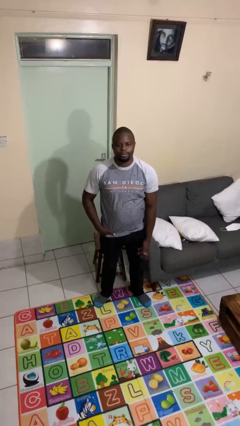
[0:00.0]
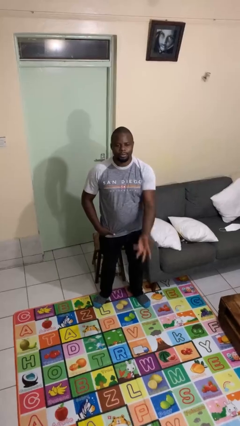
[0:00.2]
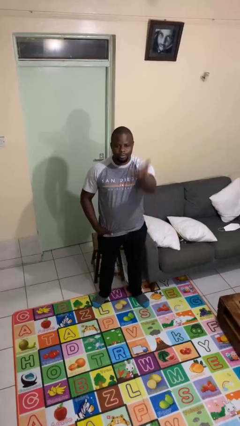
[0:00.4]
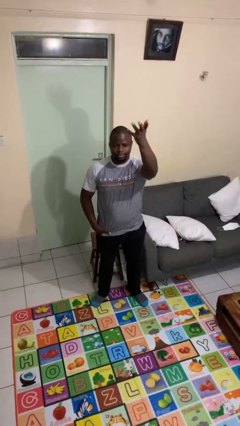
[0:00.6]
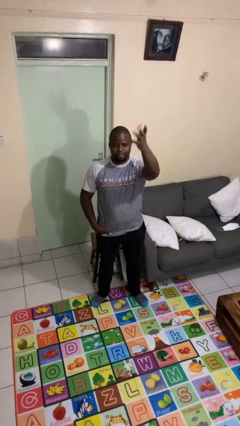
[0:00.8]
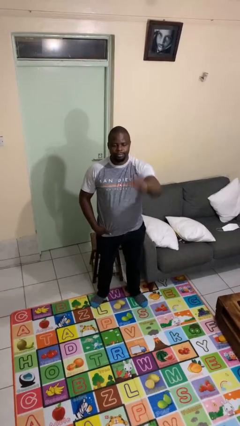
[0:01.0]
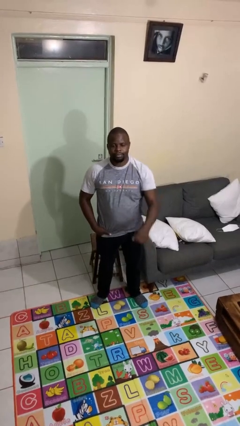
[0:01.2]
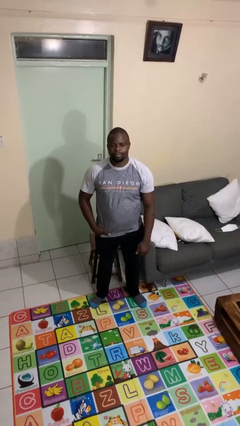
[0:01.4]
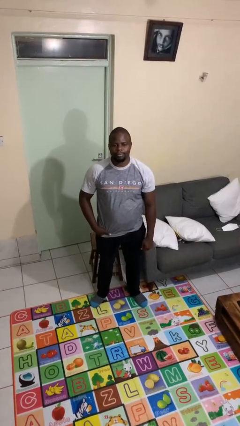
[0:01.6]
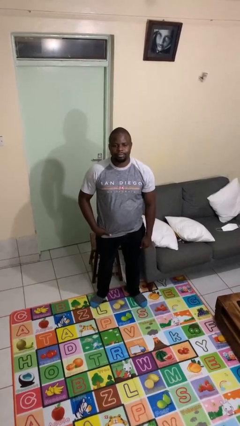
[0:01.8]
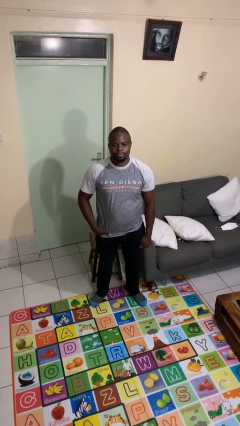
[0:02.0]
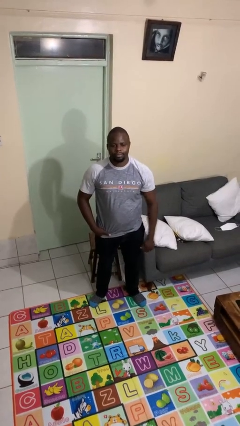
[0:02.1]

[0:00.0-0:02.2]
person gestures swipe up

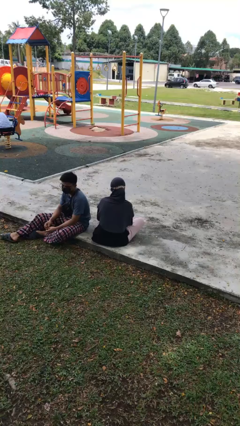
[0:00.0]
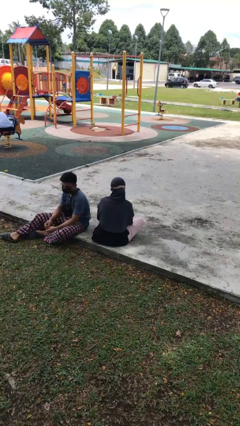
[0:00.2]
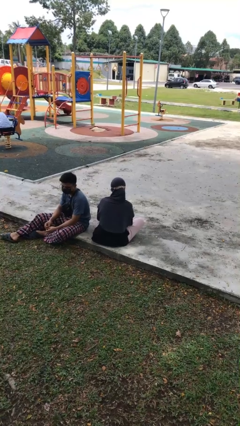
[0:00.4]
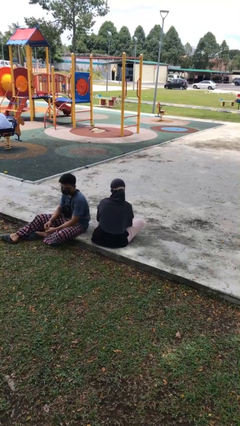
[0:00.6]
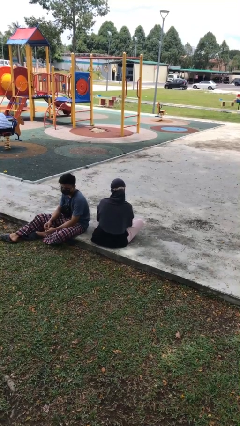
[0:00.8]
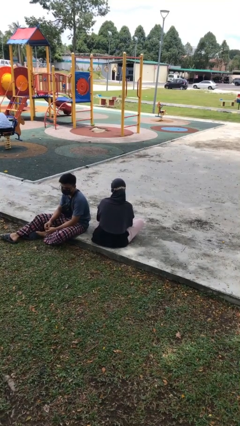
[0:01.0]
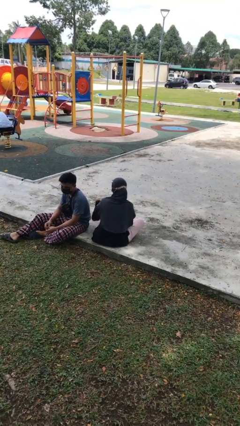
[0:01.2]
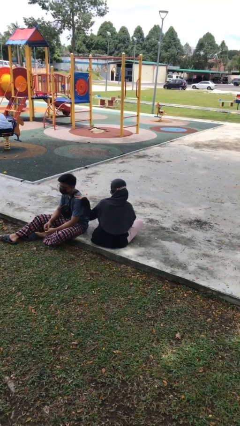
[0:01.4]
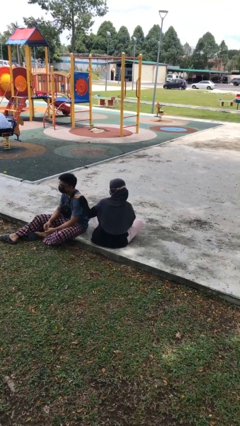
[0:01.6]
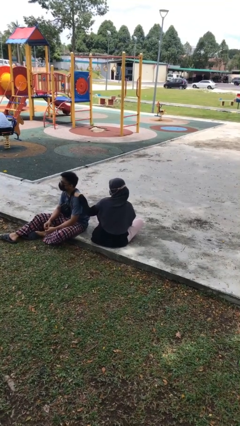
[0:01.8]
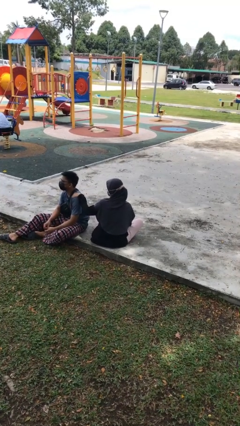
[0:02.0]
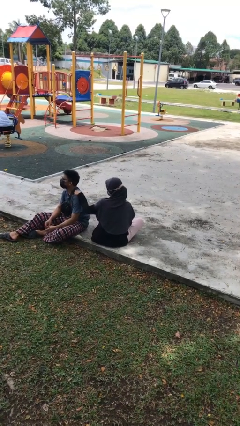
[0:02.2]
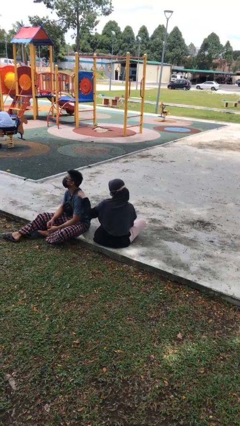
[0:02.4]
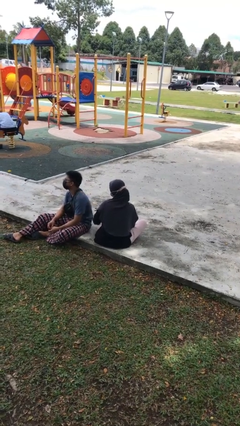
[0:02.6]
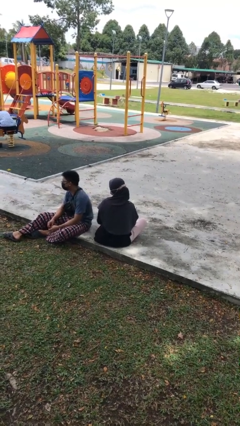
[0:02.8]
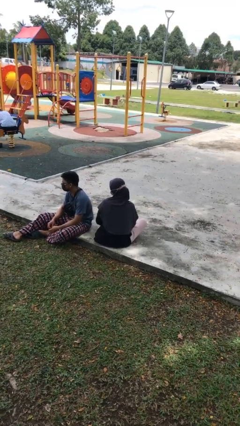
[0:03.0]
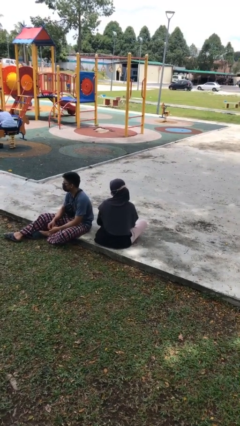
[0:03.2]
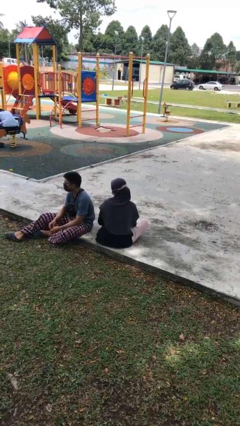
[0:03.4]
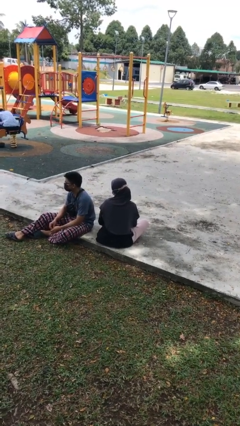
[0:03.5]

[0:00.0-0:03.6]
person pounds shoulders of person

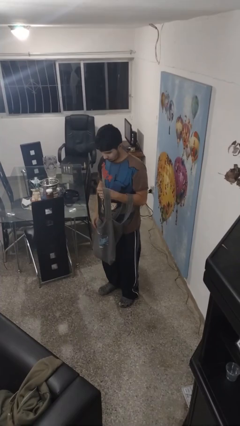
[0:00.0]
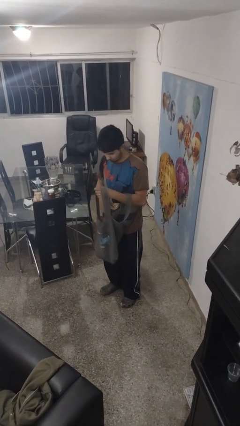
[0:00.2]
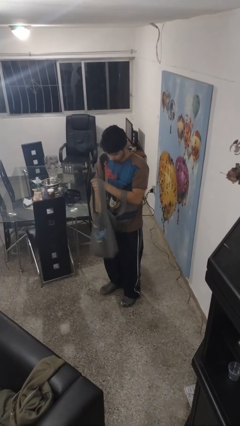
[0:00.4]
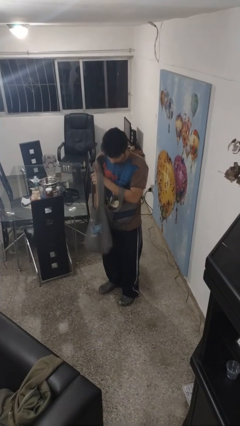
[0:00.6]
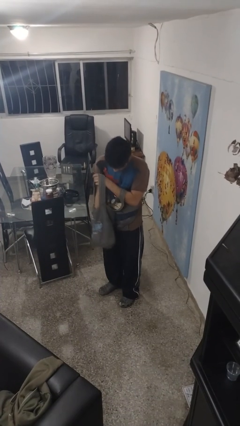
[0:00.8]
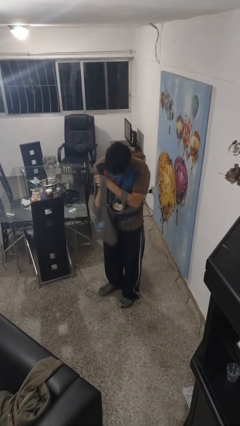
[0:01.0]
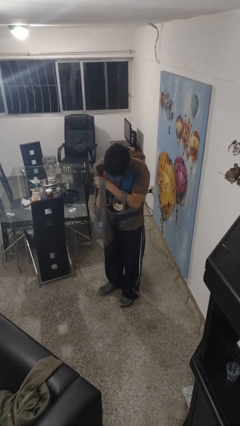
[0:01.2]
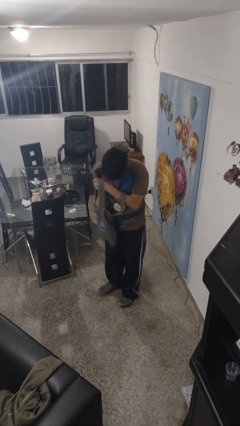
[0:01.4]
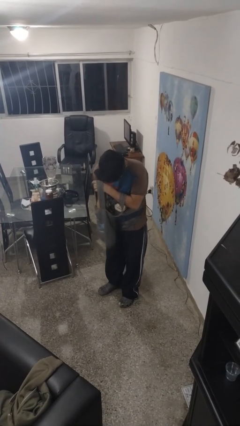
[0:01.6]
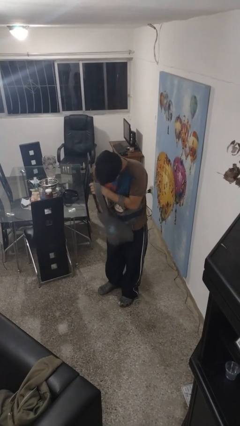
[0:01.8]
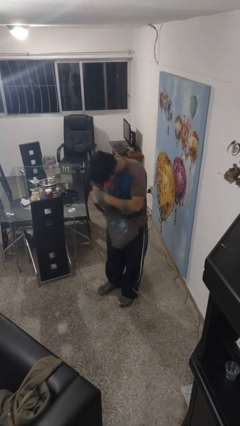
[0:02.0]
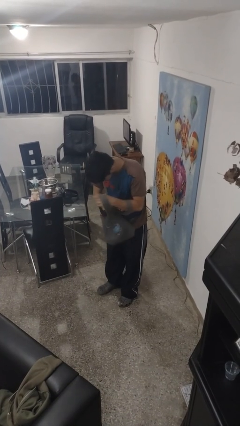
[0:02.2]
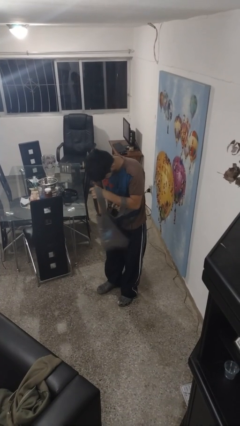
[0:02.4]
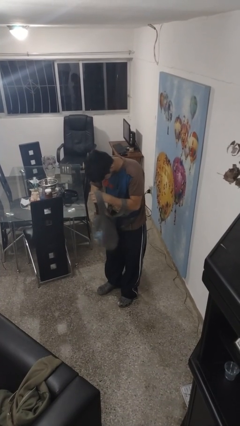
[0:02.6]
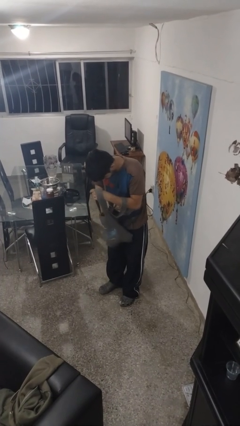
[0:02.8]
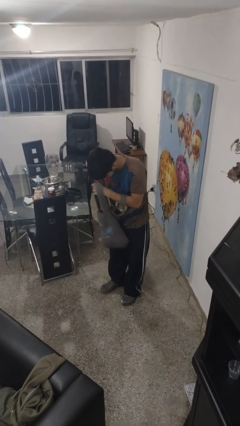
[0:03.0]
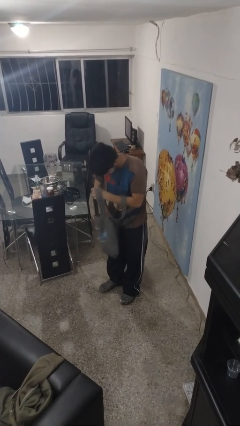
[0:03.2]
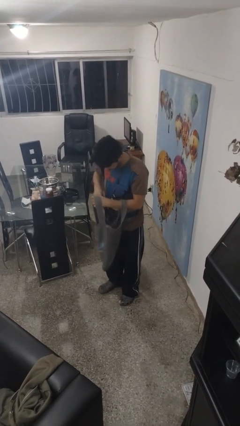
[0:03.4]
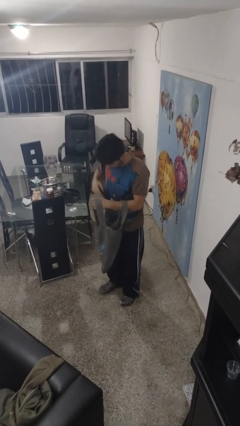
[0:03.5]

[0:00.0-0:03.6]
person searches in purse

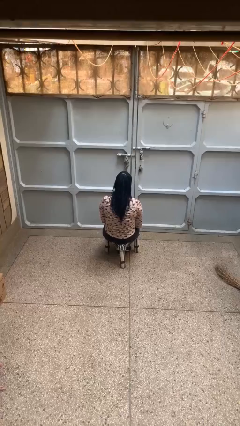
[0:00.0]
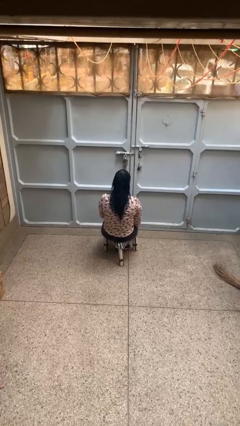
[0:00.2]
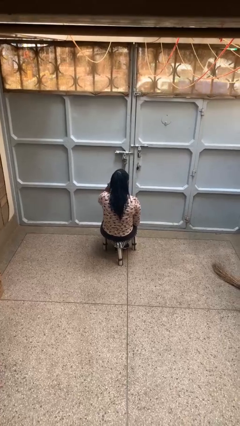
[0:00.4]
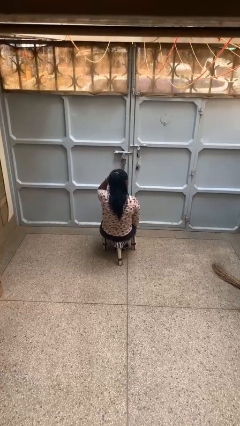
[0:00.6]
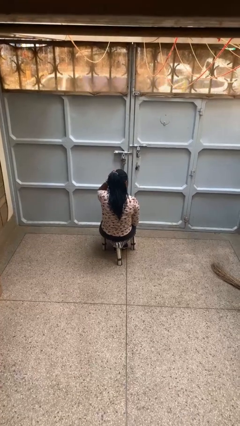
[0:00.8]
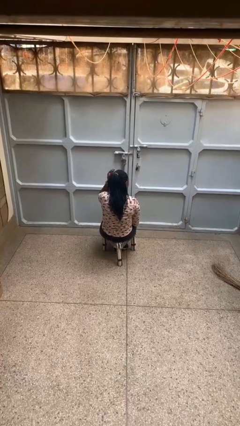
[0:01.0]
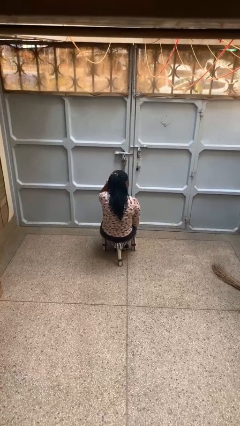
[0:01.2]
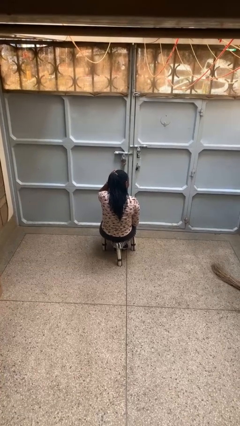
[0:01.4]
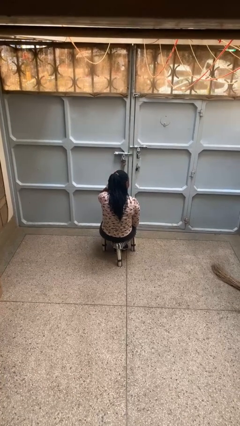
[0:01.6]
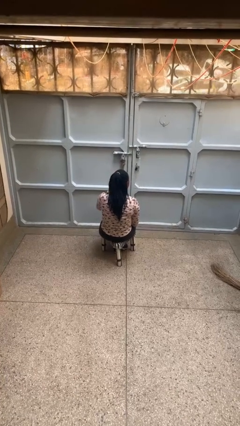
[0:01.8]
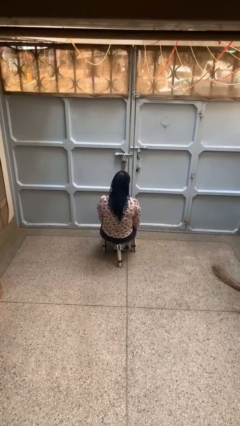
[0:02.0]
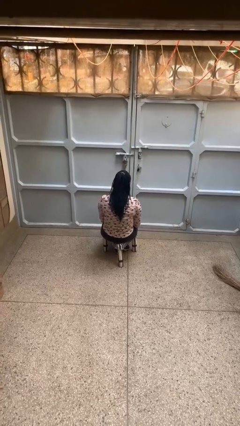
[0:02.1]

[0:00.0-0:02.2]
person strokes hair

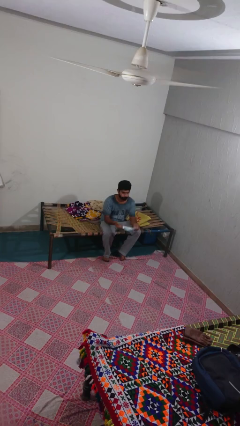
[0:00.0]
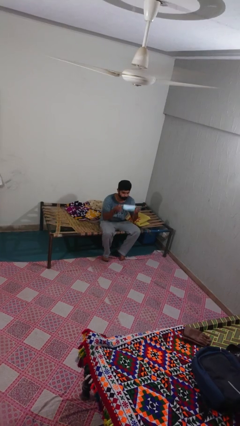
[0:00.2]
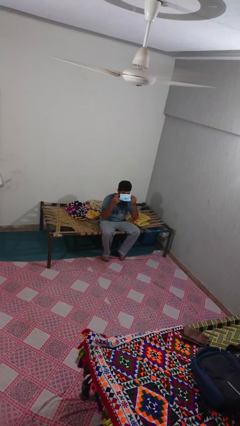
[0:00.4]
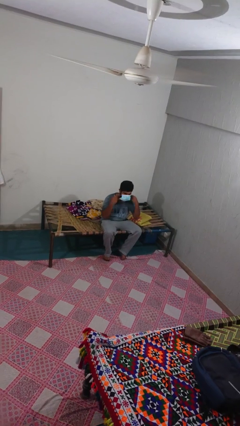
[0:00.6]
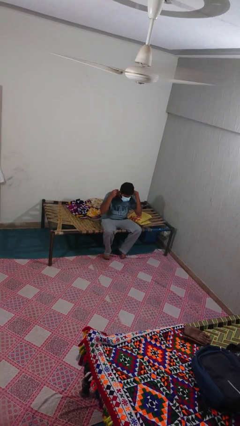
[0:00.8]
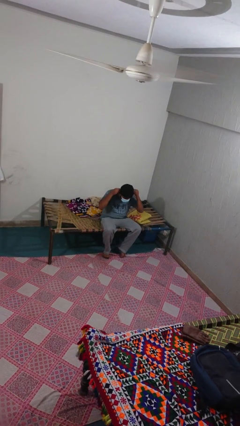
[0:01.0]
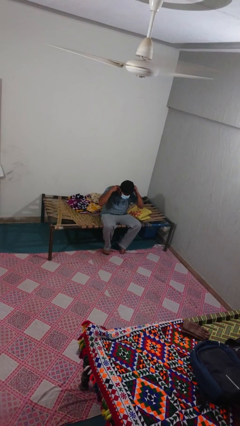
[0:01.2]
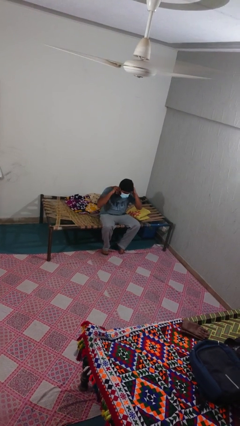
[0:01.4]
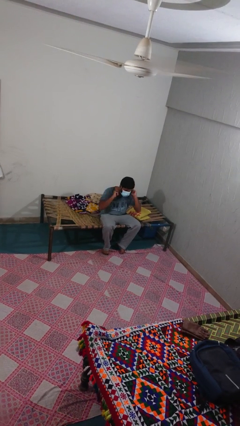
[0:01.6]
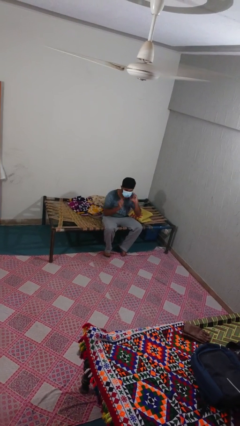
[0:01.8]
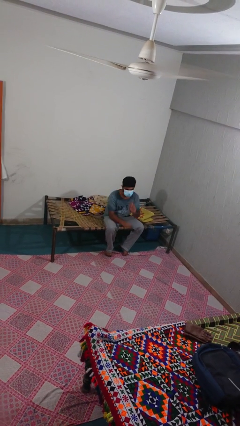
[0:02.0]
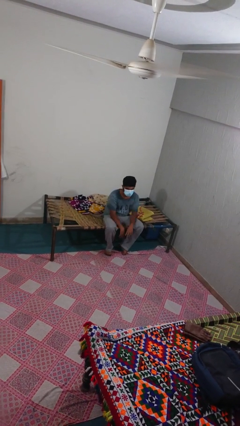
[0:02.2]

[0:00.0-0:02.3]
person puts on facemask

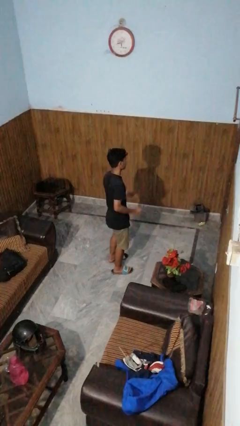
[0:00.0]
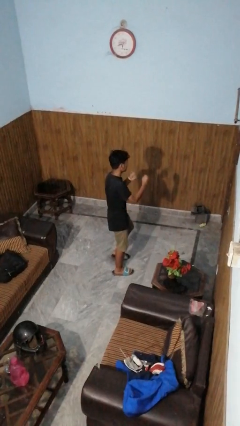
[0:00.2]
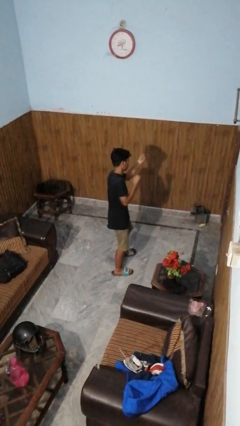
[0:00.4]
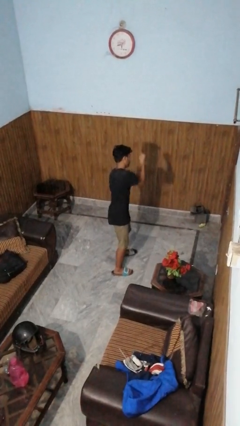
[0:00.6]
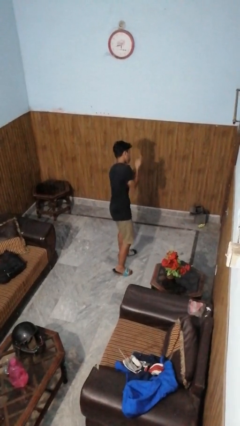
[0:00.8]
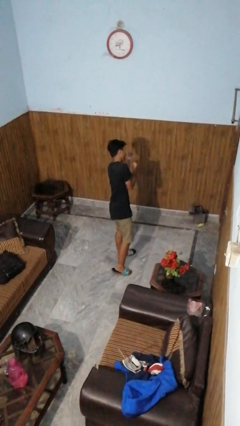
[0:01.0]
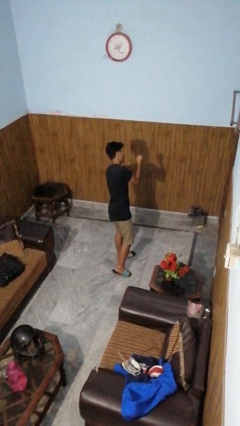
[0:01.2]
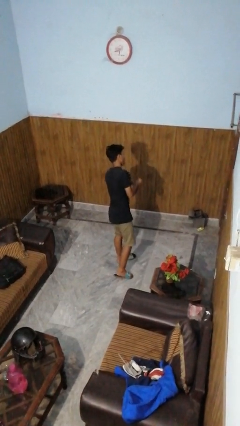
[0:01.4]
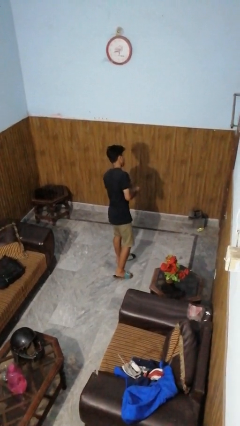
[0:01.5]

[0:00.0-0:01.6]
person punches

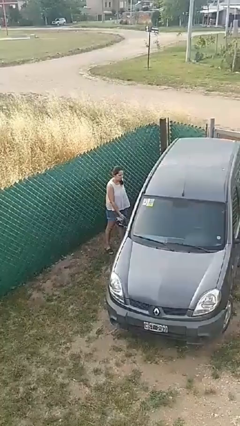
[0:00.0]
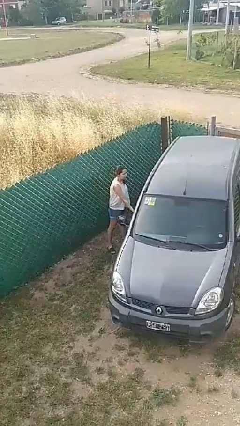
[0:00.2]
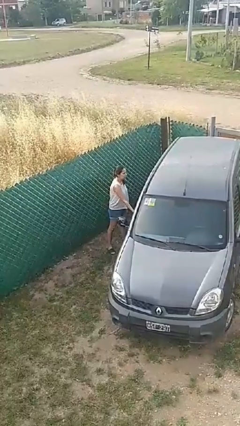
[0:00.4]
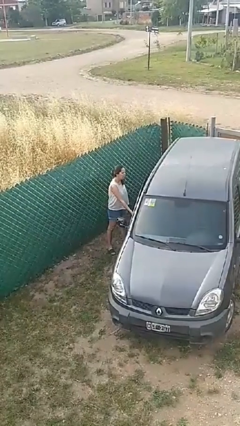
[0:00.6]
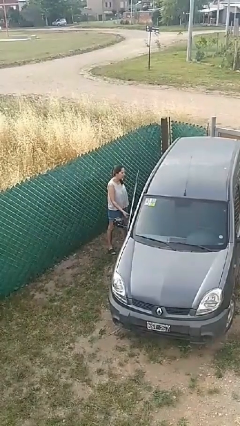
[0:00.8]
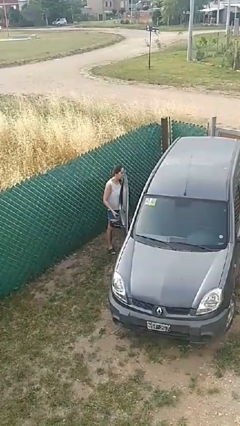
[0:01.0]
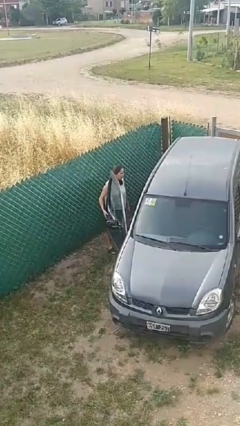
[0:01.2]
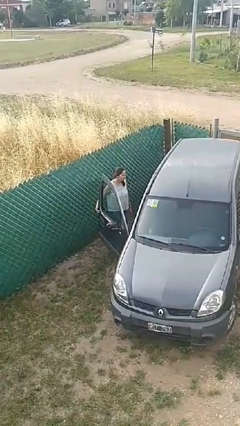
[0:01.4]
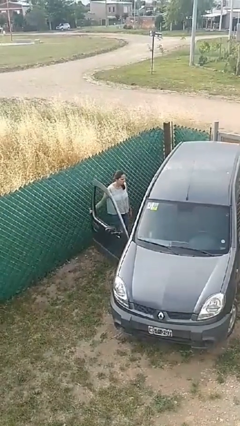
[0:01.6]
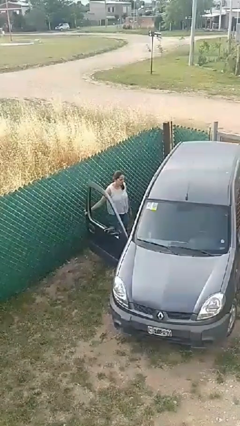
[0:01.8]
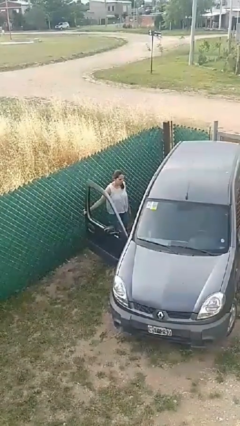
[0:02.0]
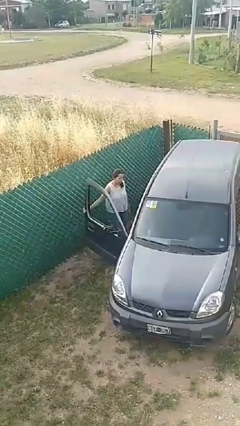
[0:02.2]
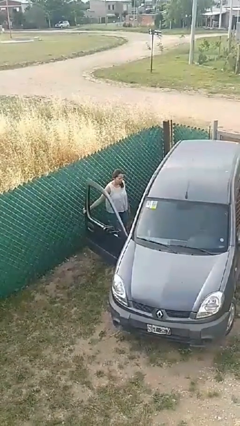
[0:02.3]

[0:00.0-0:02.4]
person opens car door
